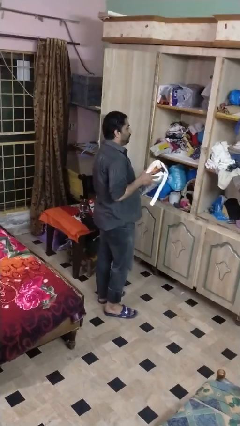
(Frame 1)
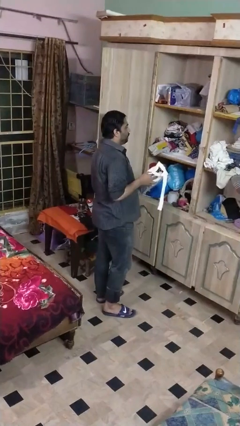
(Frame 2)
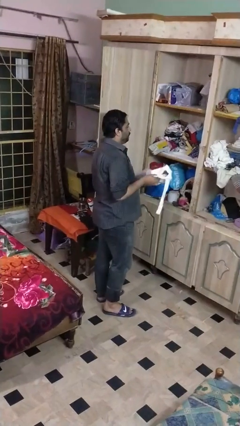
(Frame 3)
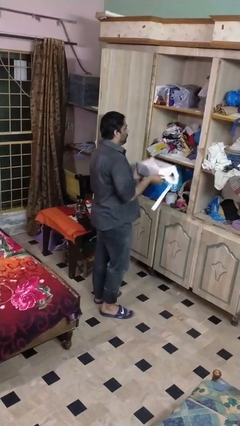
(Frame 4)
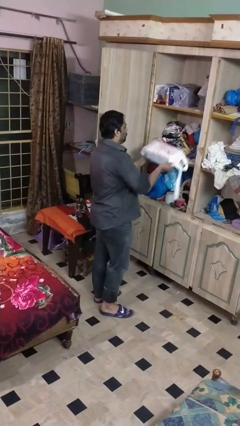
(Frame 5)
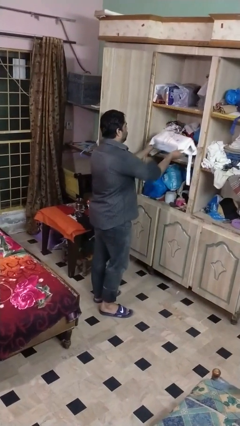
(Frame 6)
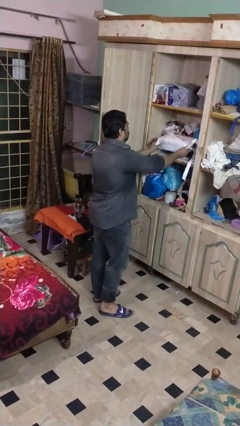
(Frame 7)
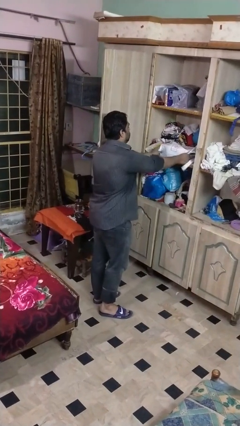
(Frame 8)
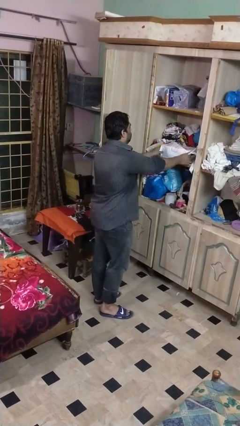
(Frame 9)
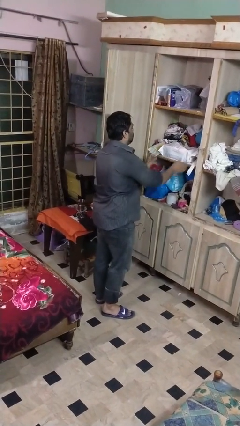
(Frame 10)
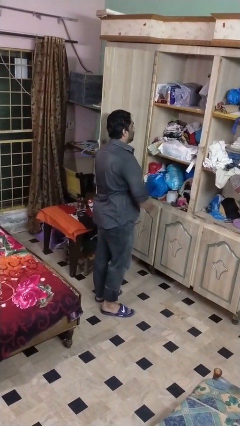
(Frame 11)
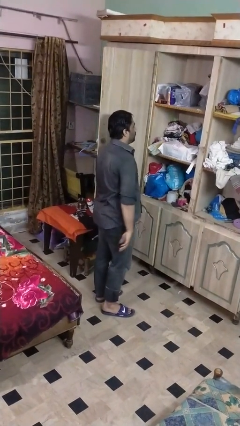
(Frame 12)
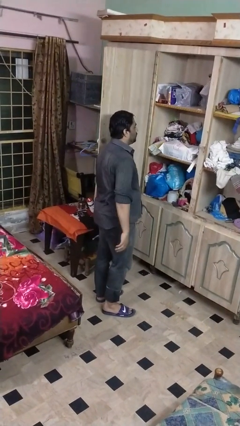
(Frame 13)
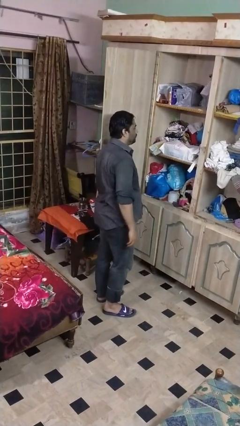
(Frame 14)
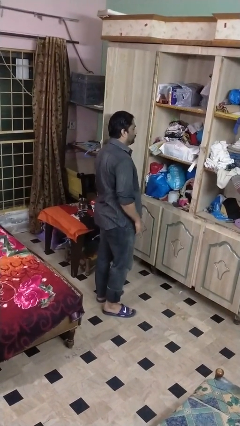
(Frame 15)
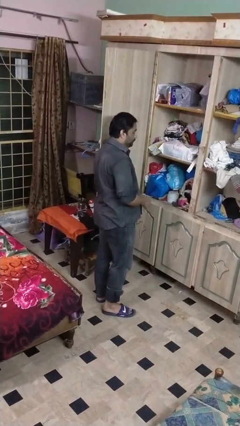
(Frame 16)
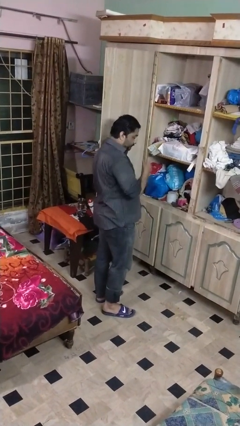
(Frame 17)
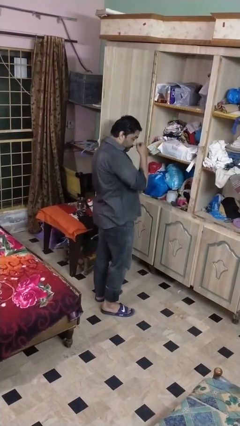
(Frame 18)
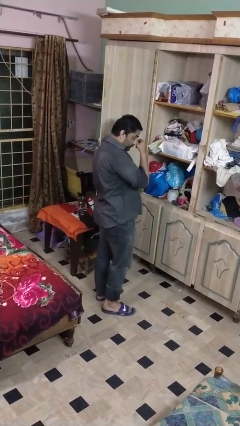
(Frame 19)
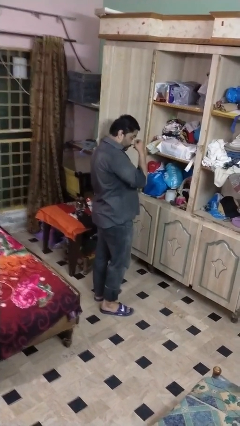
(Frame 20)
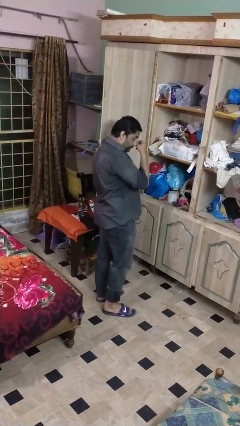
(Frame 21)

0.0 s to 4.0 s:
person puts down object into cabinet

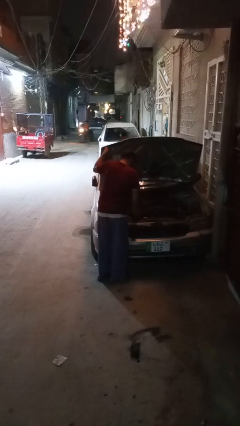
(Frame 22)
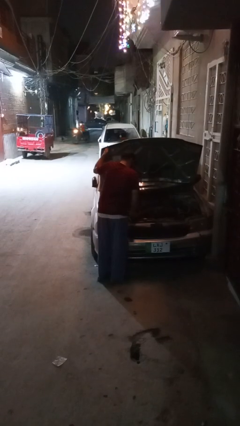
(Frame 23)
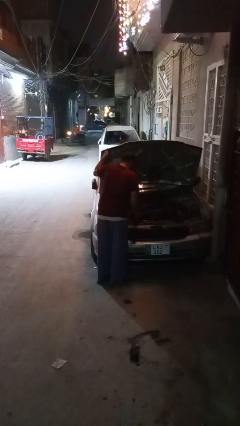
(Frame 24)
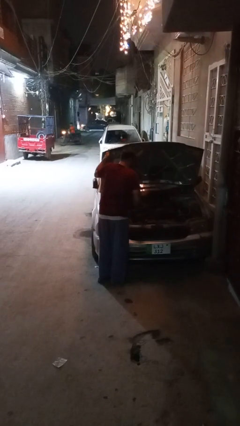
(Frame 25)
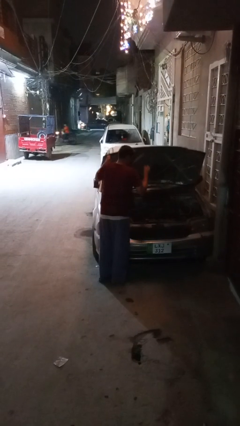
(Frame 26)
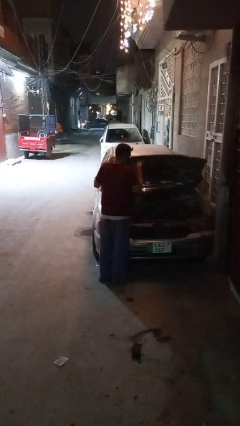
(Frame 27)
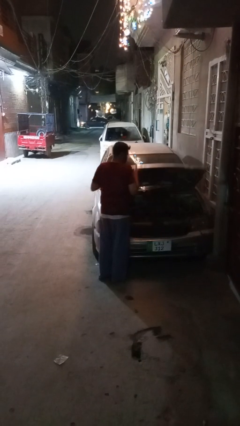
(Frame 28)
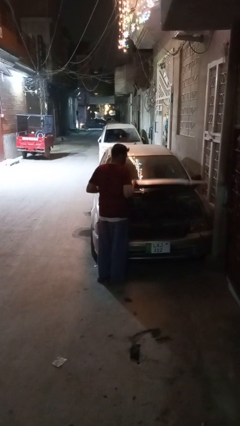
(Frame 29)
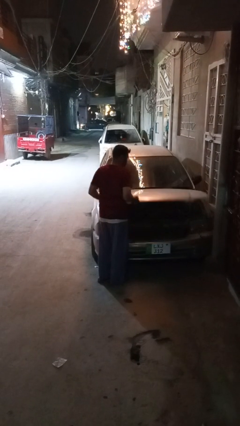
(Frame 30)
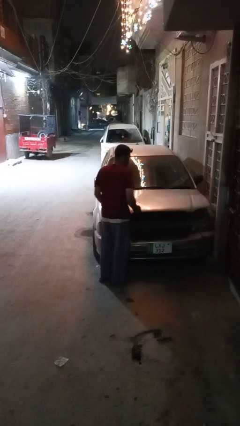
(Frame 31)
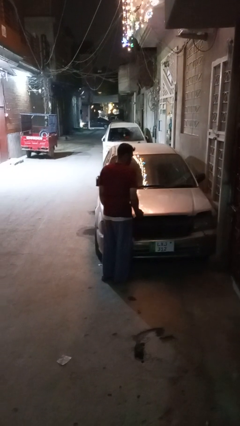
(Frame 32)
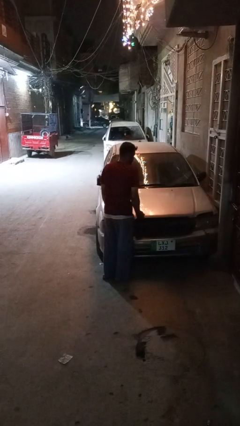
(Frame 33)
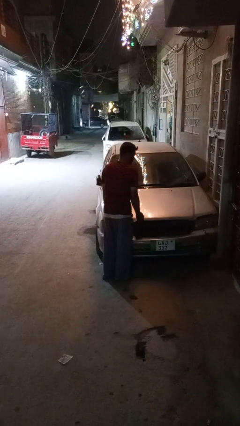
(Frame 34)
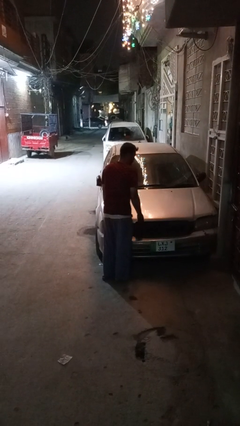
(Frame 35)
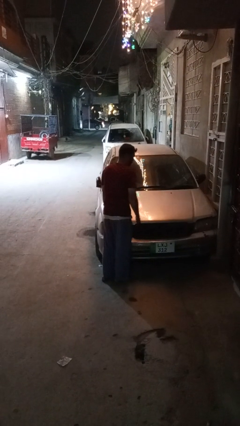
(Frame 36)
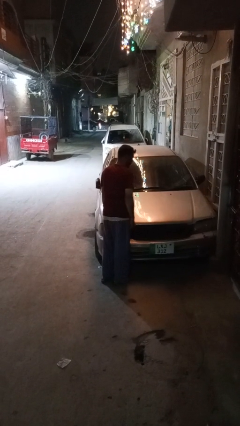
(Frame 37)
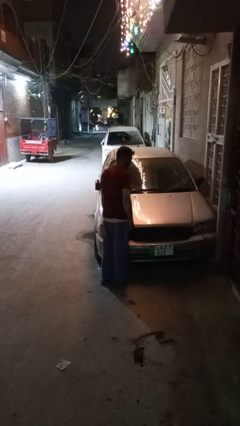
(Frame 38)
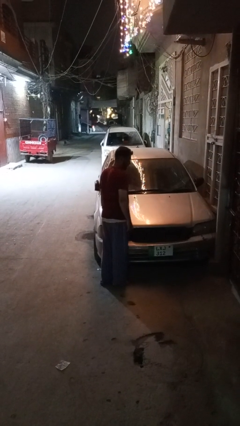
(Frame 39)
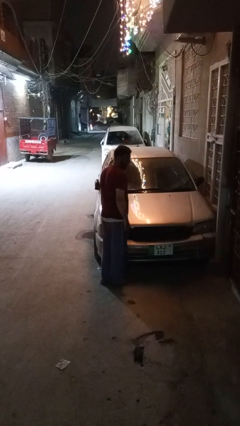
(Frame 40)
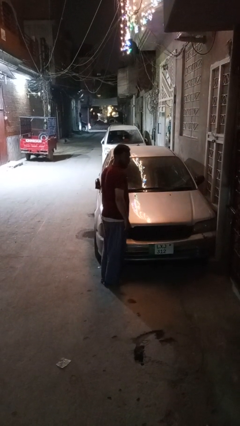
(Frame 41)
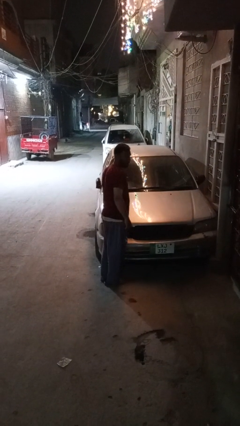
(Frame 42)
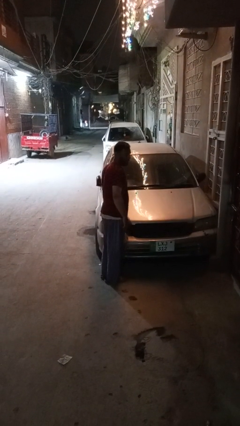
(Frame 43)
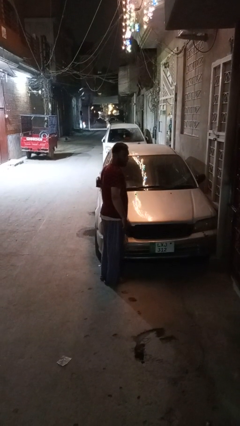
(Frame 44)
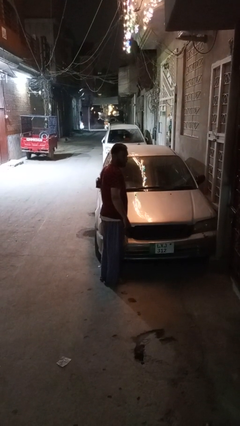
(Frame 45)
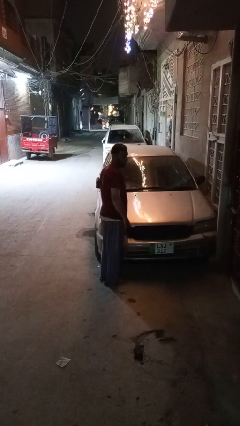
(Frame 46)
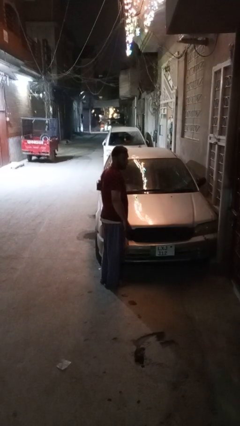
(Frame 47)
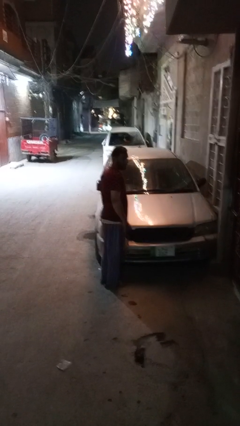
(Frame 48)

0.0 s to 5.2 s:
person closes car hood

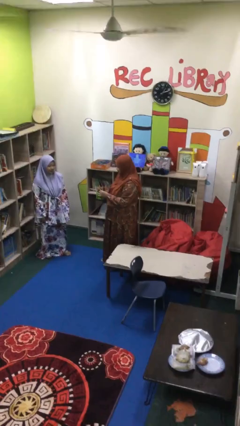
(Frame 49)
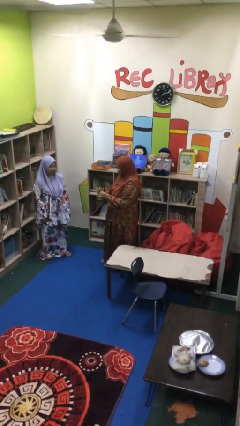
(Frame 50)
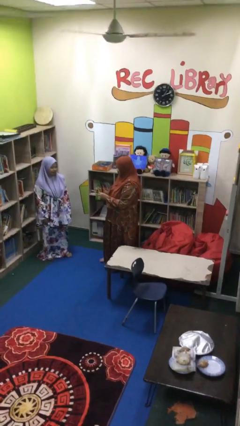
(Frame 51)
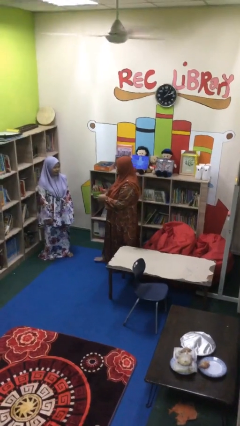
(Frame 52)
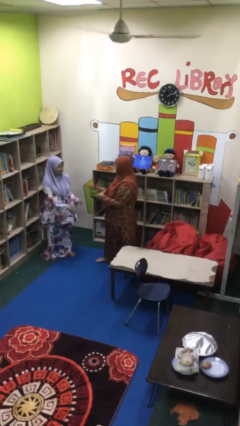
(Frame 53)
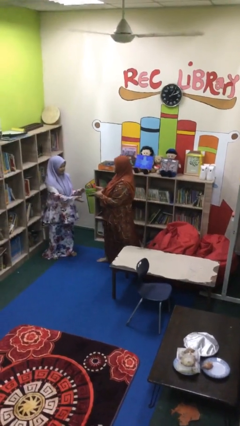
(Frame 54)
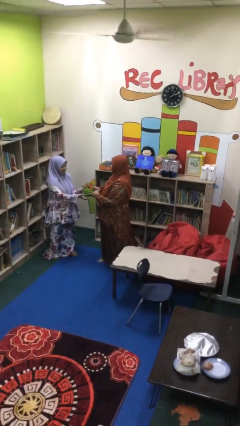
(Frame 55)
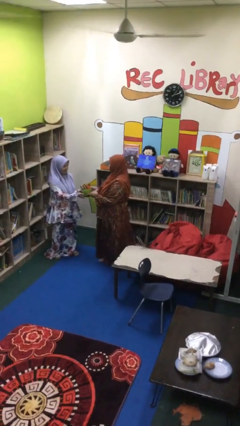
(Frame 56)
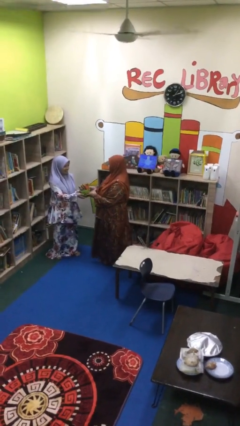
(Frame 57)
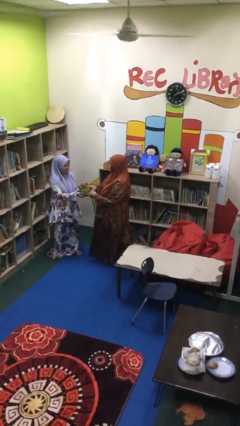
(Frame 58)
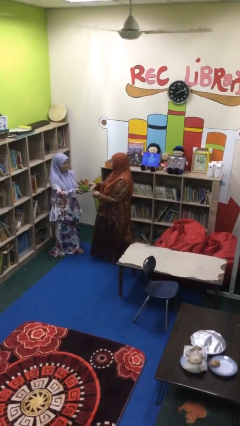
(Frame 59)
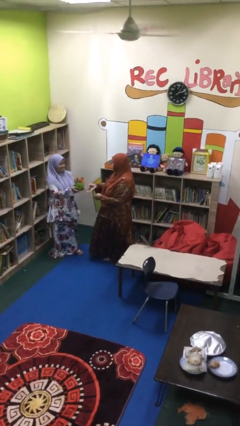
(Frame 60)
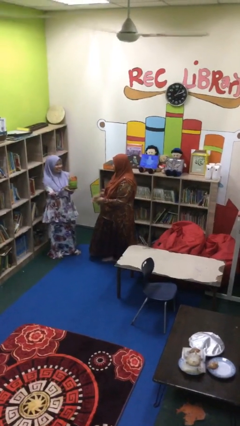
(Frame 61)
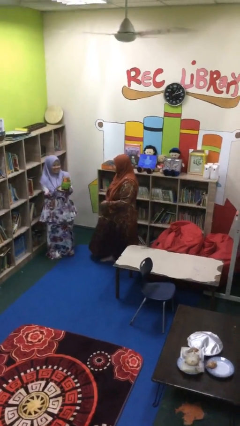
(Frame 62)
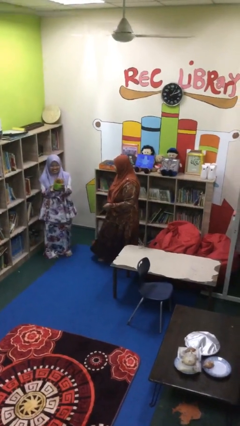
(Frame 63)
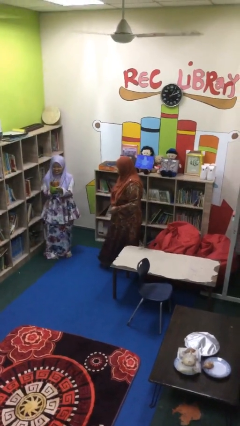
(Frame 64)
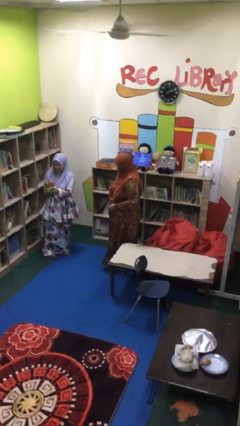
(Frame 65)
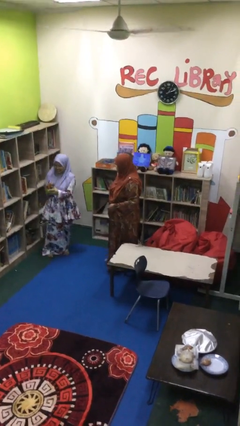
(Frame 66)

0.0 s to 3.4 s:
person transfers object to person

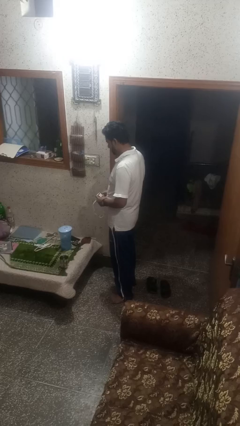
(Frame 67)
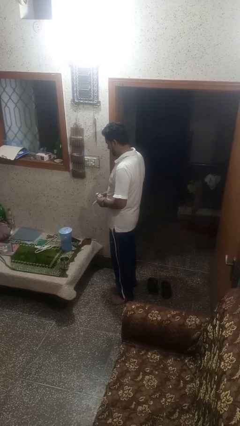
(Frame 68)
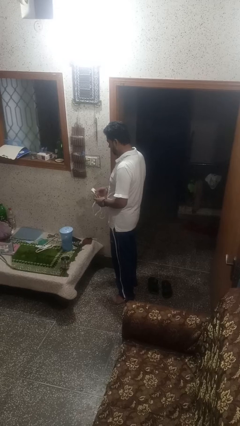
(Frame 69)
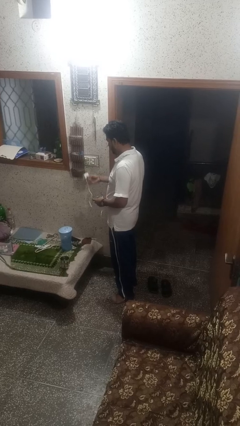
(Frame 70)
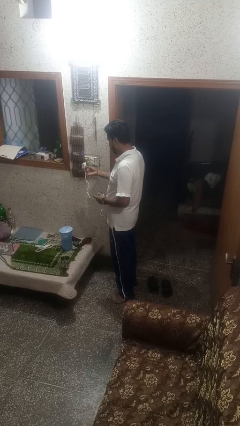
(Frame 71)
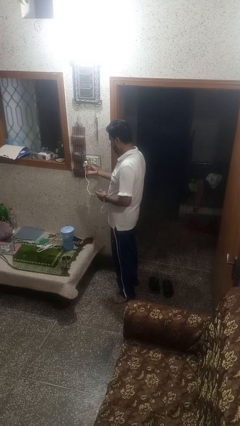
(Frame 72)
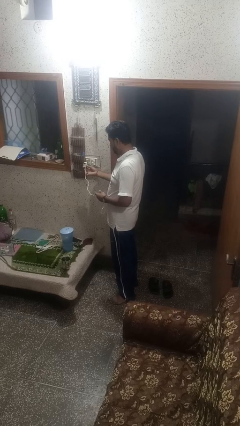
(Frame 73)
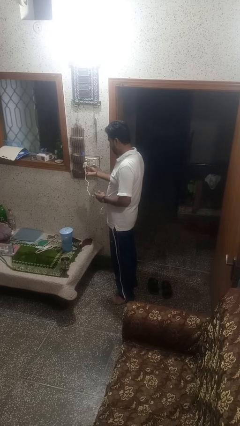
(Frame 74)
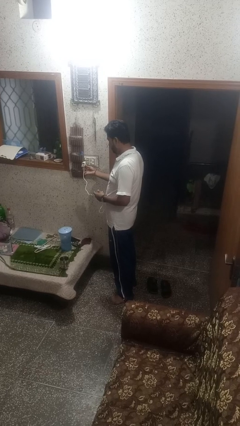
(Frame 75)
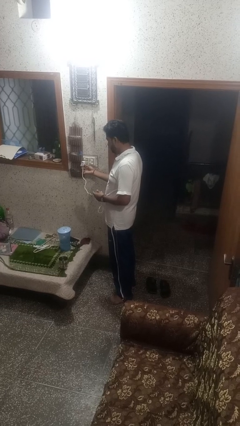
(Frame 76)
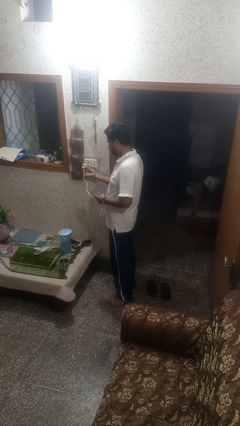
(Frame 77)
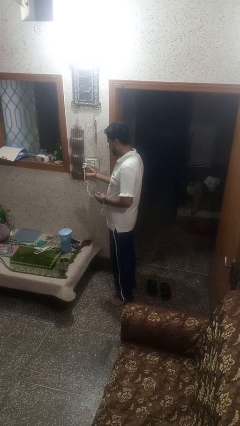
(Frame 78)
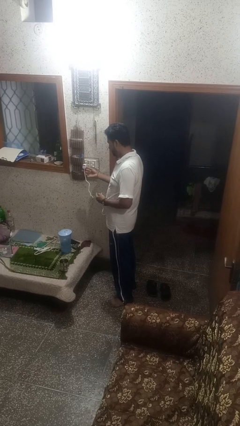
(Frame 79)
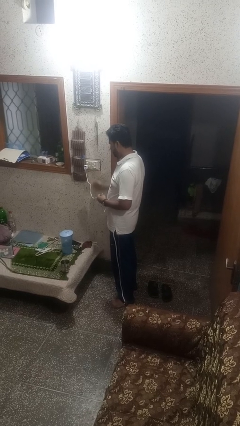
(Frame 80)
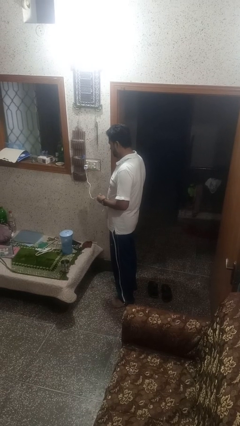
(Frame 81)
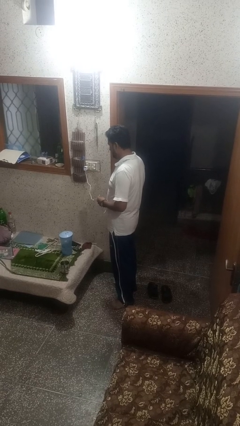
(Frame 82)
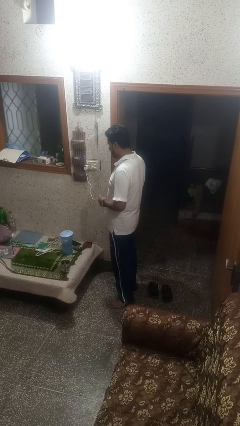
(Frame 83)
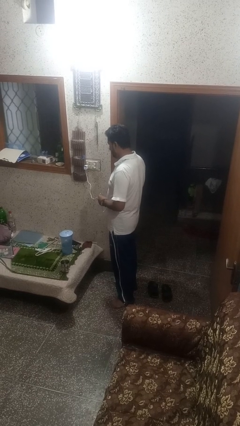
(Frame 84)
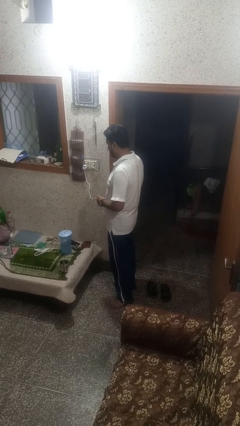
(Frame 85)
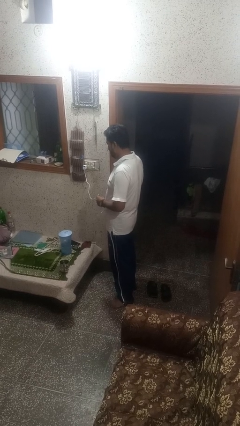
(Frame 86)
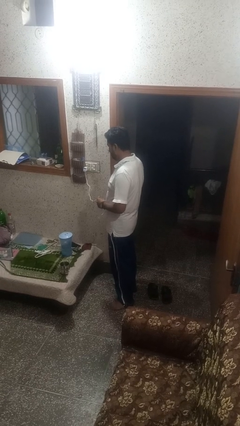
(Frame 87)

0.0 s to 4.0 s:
person plugs into electrical socket

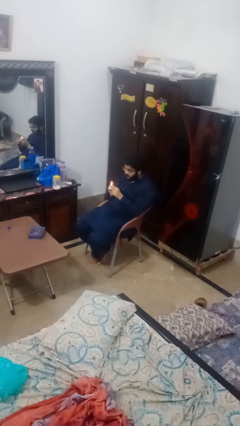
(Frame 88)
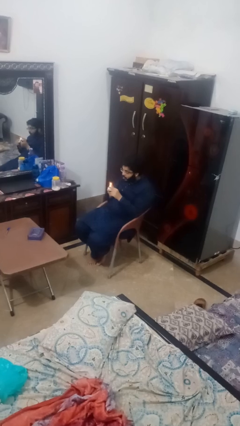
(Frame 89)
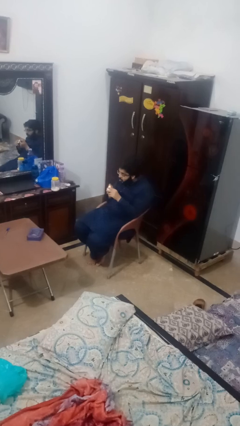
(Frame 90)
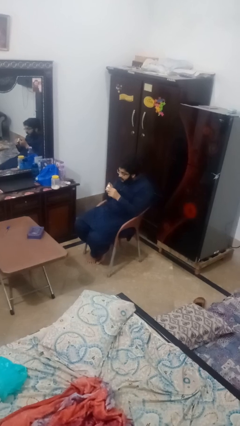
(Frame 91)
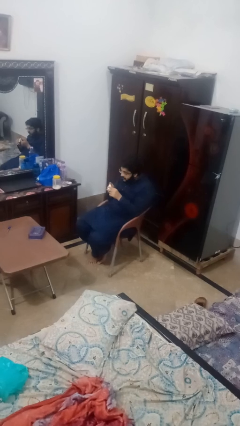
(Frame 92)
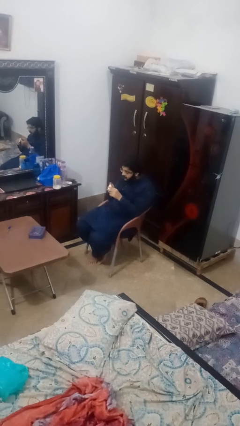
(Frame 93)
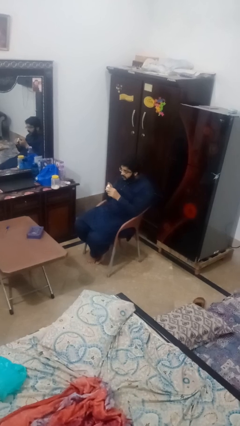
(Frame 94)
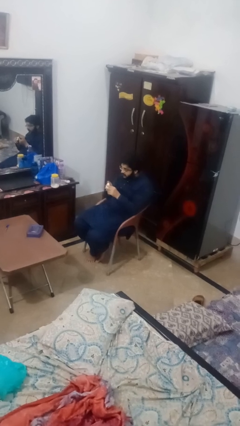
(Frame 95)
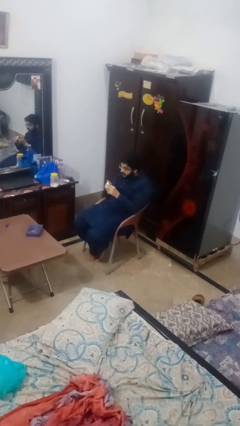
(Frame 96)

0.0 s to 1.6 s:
person extinguishes candle
